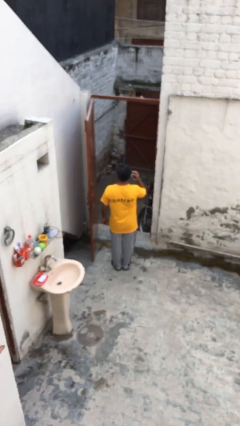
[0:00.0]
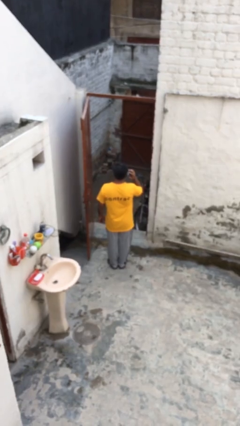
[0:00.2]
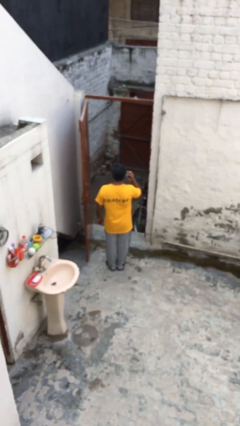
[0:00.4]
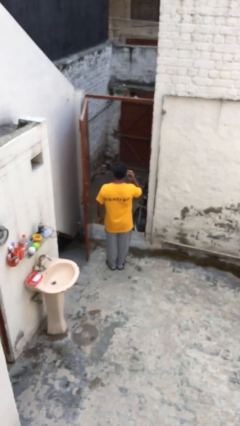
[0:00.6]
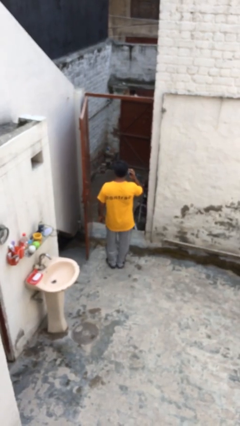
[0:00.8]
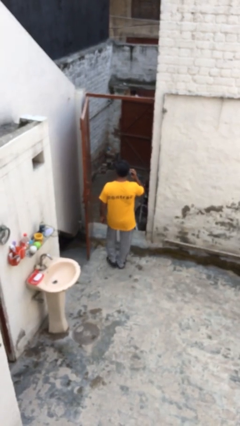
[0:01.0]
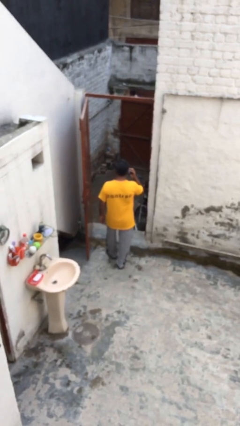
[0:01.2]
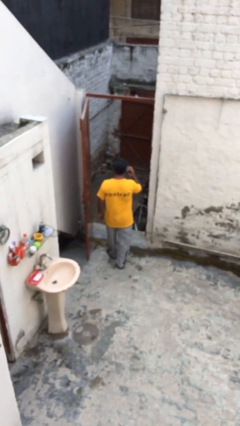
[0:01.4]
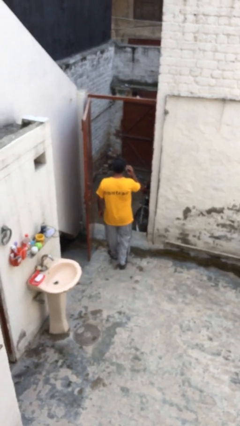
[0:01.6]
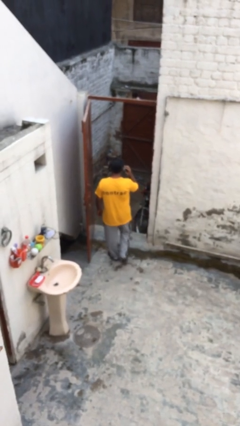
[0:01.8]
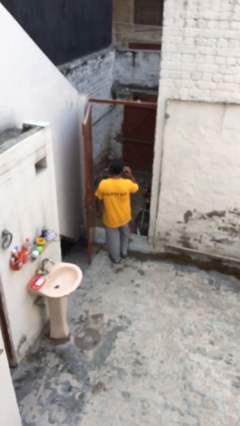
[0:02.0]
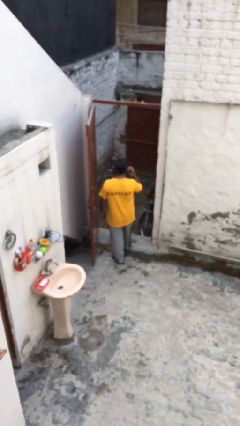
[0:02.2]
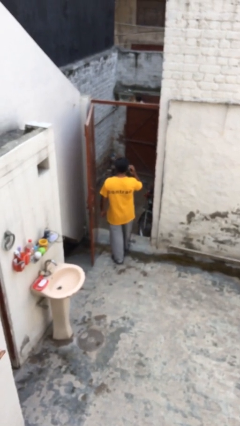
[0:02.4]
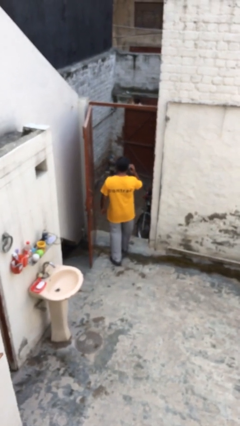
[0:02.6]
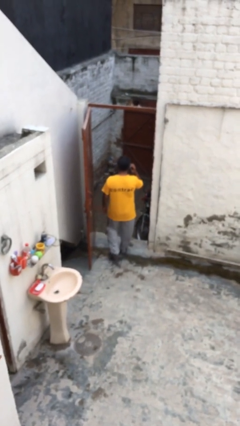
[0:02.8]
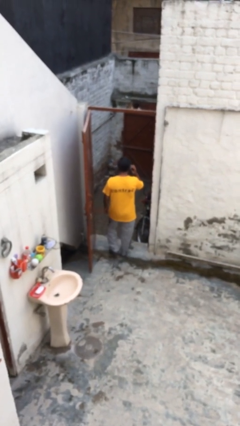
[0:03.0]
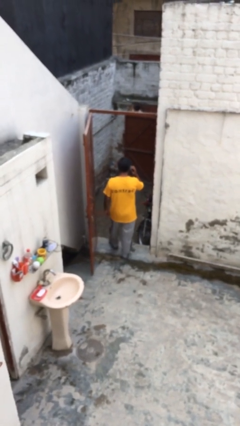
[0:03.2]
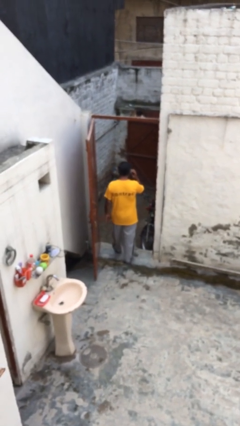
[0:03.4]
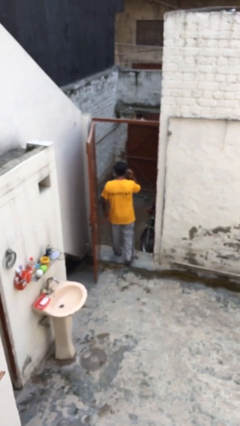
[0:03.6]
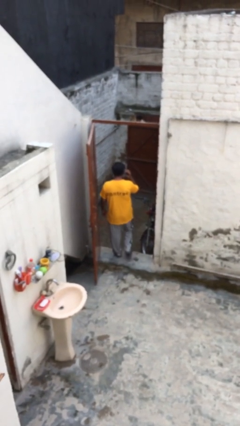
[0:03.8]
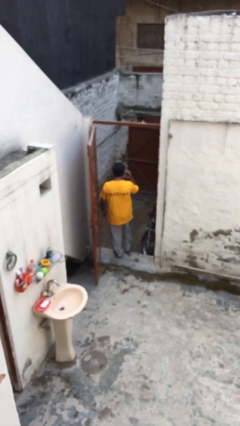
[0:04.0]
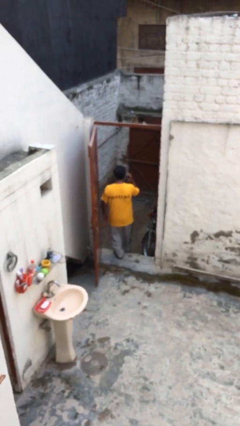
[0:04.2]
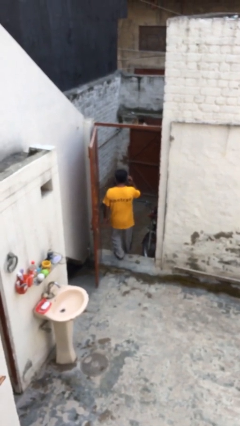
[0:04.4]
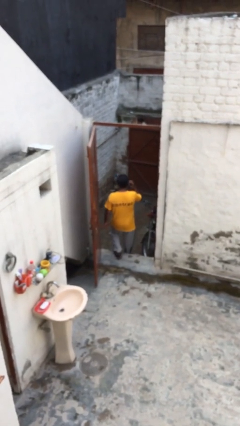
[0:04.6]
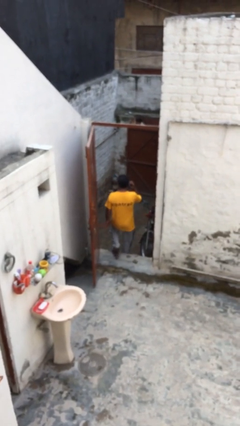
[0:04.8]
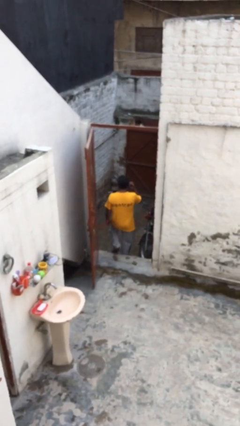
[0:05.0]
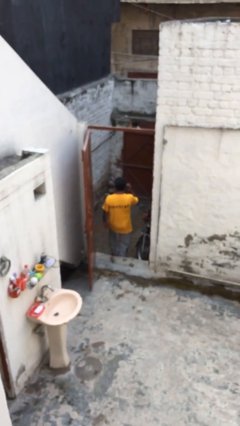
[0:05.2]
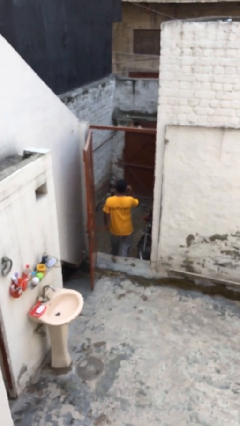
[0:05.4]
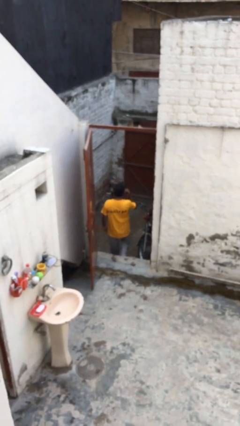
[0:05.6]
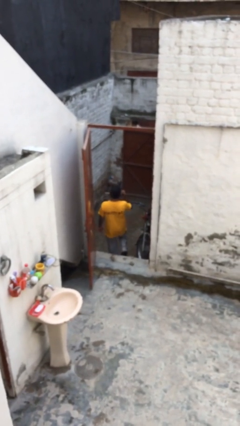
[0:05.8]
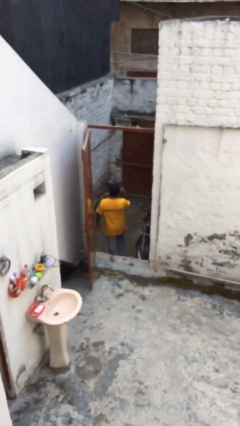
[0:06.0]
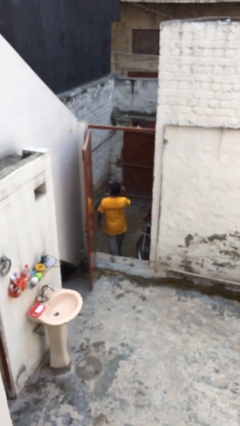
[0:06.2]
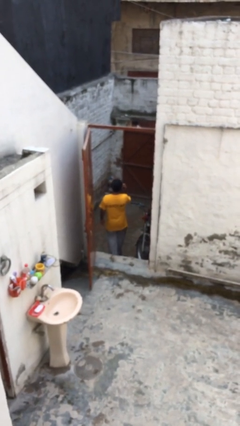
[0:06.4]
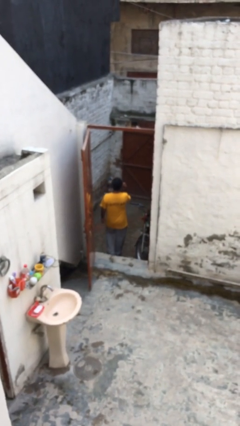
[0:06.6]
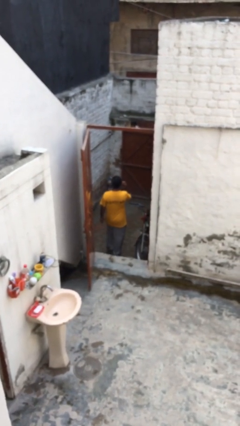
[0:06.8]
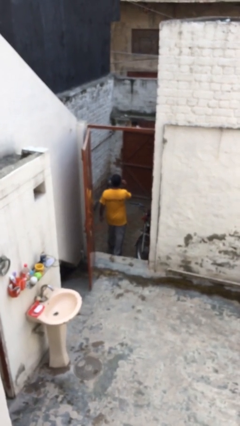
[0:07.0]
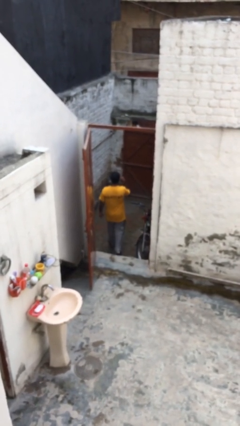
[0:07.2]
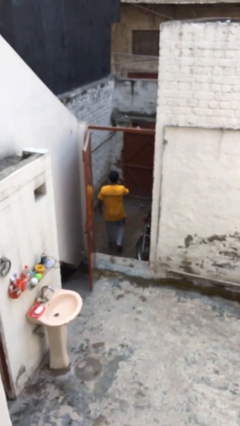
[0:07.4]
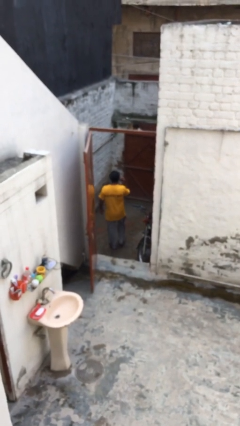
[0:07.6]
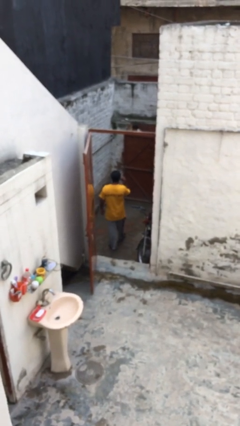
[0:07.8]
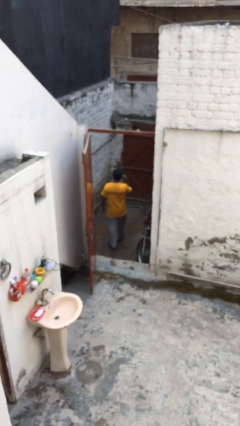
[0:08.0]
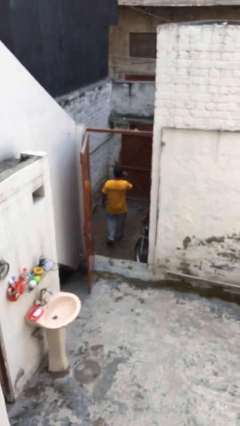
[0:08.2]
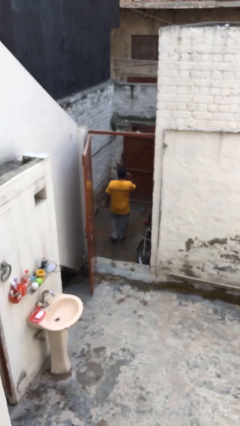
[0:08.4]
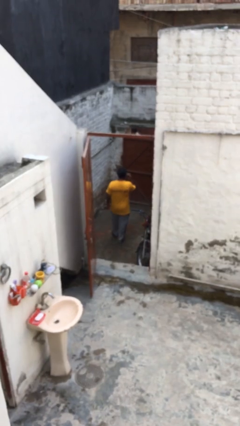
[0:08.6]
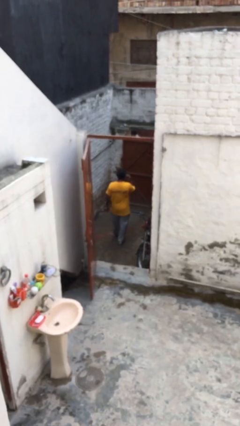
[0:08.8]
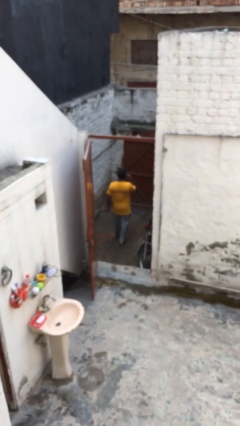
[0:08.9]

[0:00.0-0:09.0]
person exits scene through structure

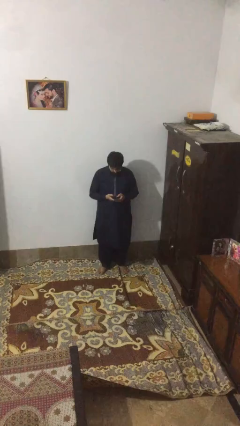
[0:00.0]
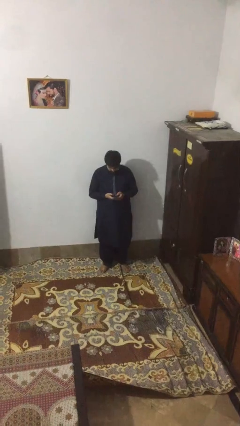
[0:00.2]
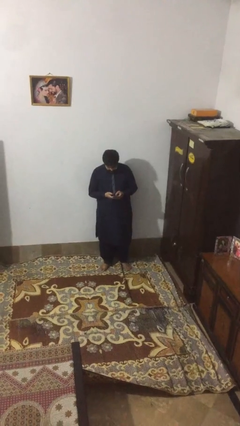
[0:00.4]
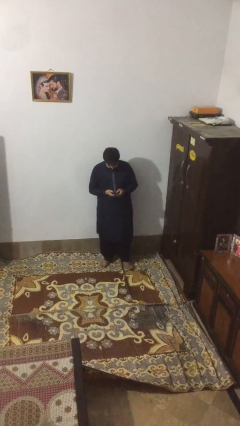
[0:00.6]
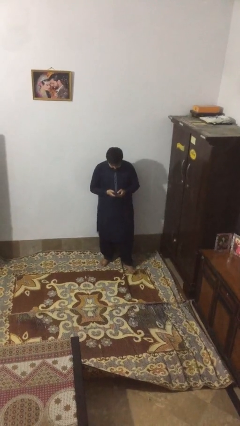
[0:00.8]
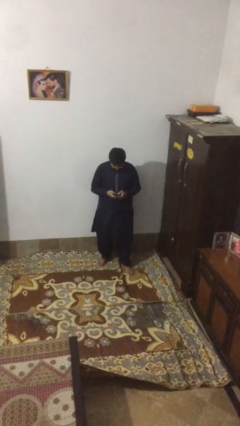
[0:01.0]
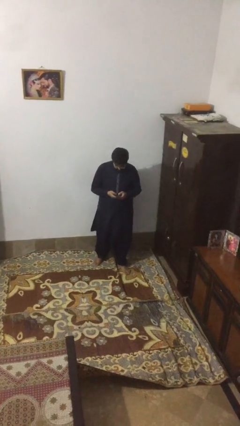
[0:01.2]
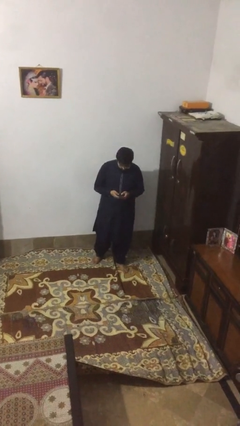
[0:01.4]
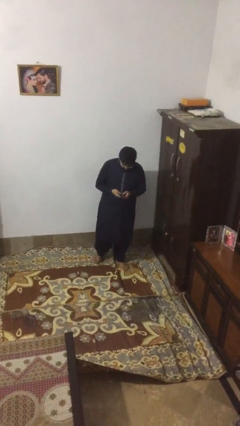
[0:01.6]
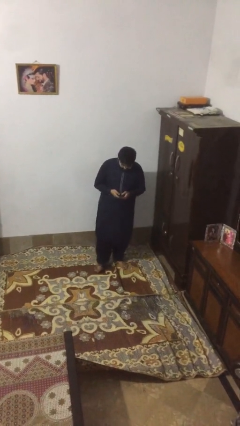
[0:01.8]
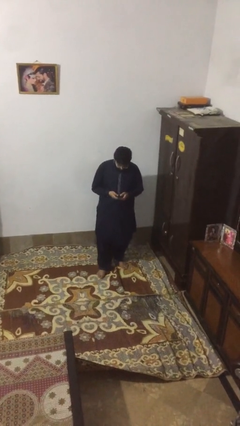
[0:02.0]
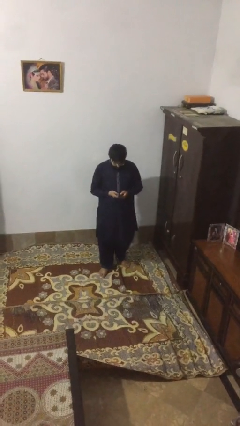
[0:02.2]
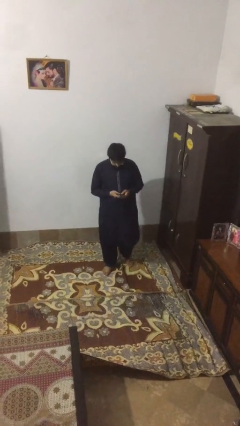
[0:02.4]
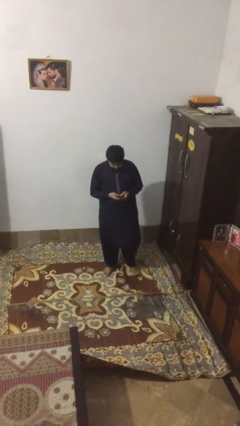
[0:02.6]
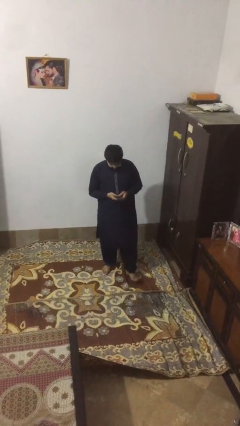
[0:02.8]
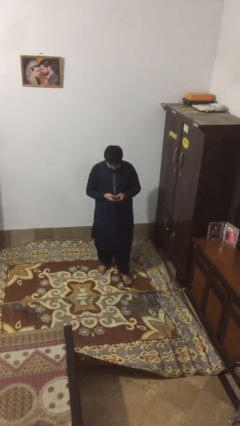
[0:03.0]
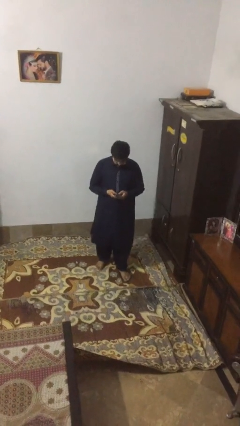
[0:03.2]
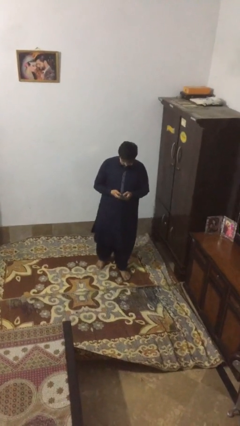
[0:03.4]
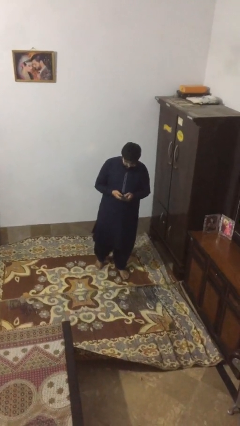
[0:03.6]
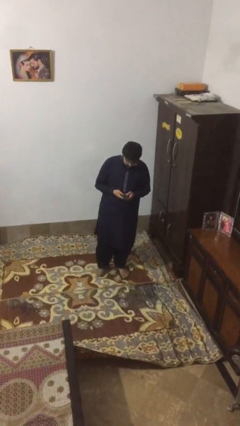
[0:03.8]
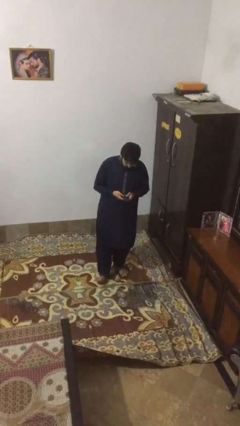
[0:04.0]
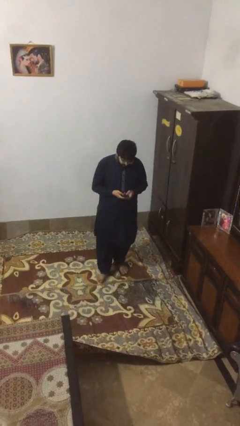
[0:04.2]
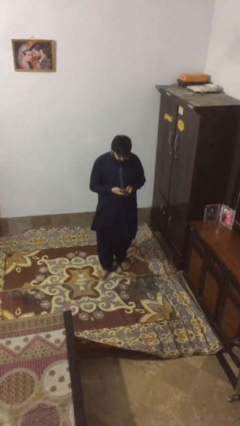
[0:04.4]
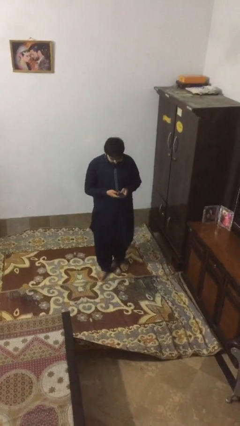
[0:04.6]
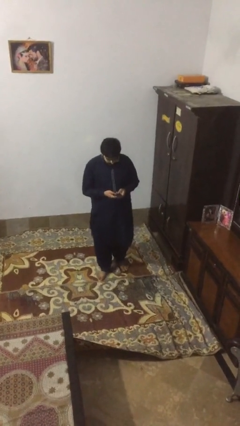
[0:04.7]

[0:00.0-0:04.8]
person texts on phone

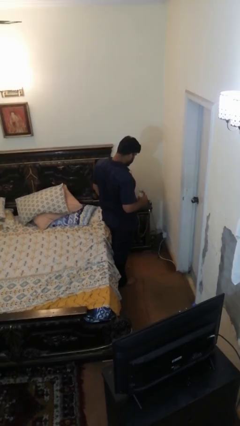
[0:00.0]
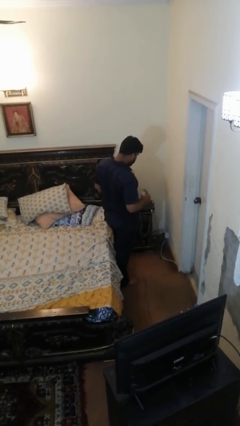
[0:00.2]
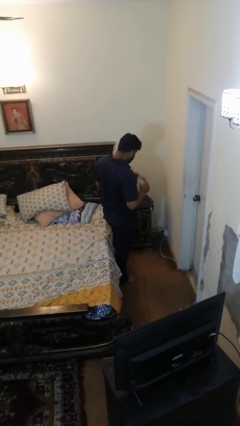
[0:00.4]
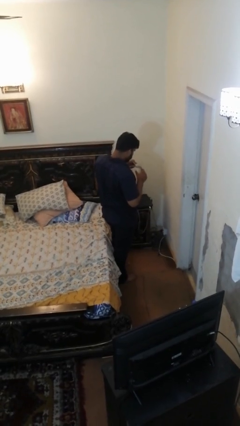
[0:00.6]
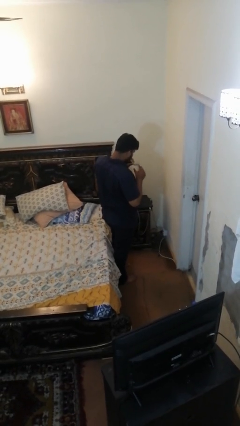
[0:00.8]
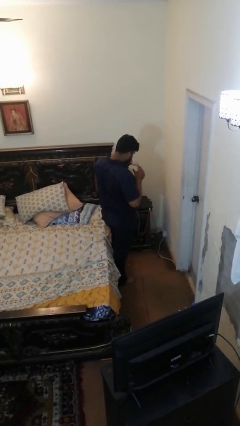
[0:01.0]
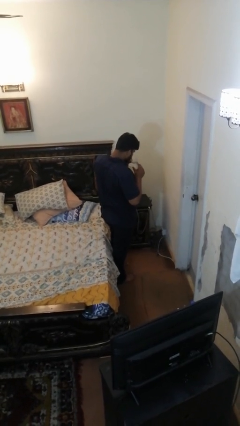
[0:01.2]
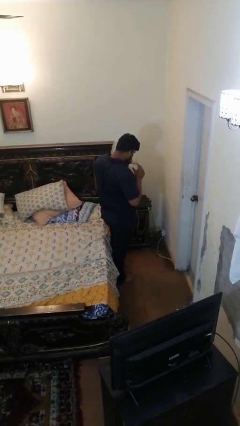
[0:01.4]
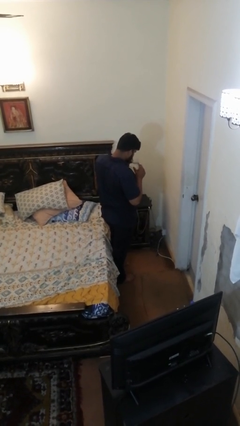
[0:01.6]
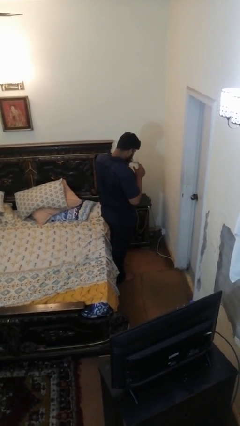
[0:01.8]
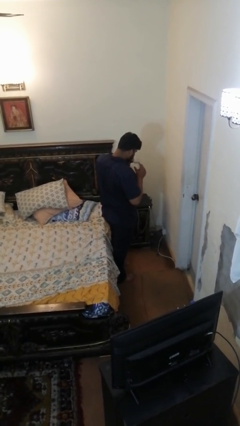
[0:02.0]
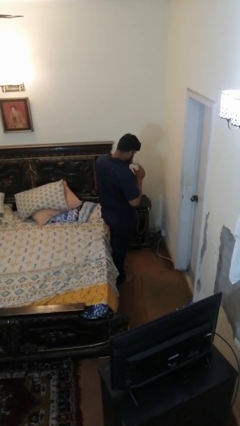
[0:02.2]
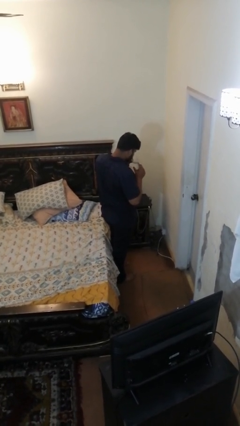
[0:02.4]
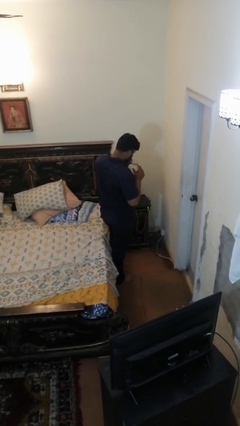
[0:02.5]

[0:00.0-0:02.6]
person drinks from straw

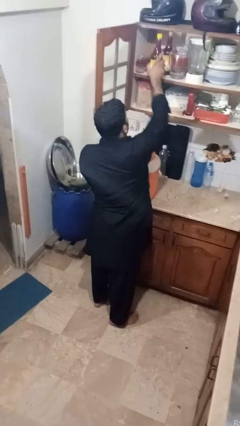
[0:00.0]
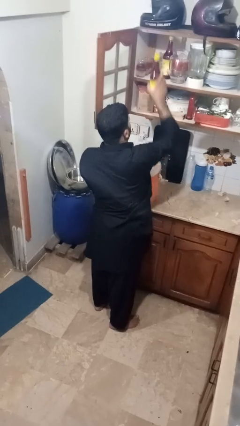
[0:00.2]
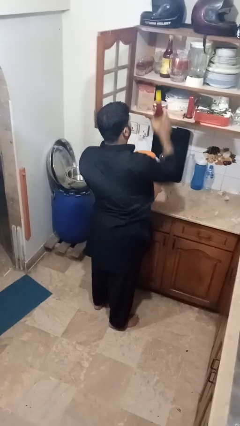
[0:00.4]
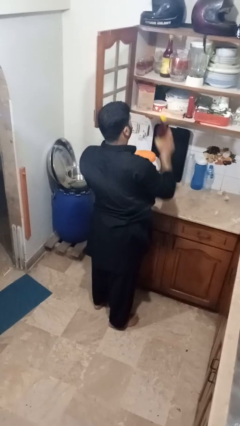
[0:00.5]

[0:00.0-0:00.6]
person puts down object into cabinet

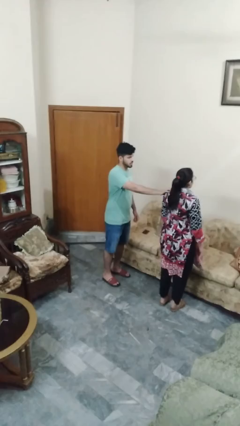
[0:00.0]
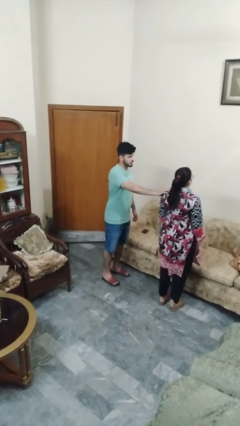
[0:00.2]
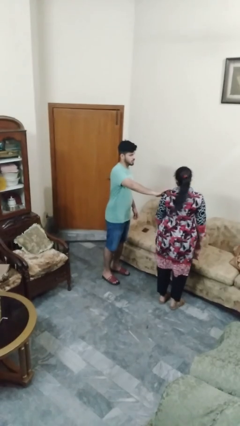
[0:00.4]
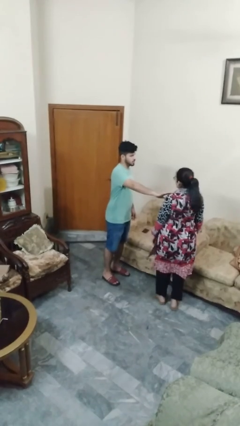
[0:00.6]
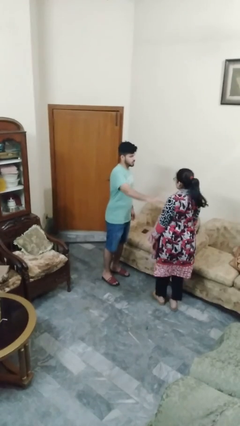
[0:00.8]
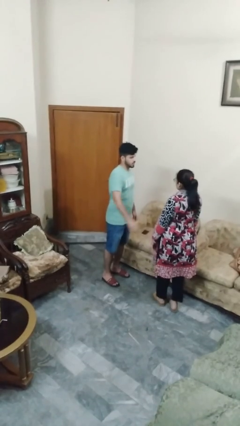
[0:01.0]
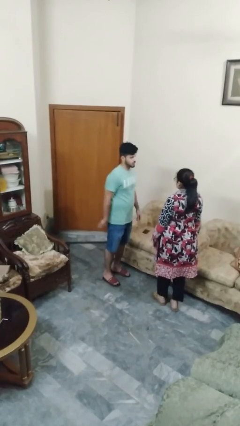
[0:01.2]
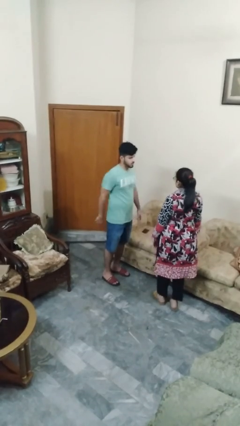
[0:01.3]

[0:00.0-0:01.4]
person spins person around
